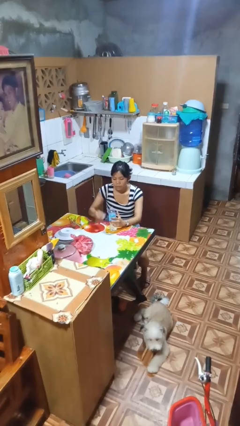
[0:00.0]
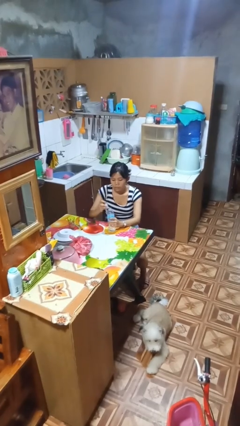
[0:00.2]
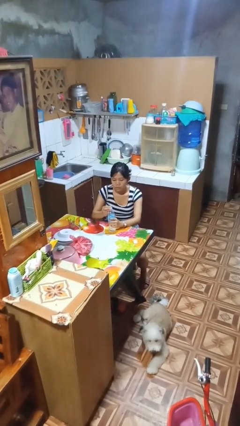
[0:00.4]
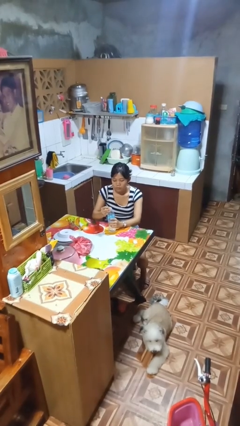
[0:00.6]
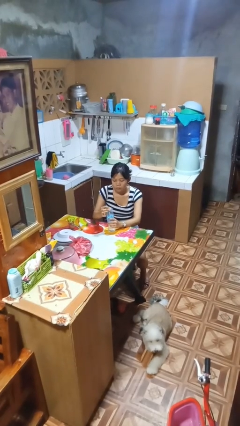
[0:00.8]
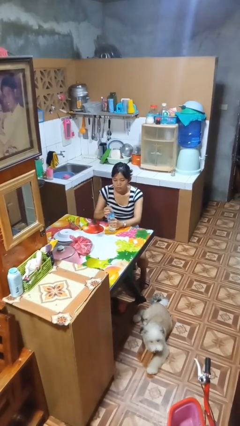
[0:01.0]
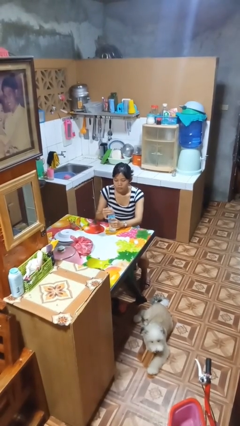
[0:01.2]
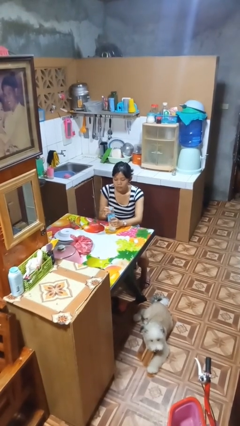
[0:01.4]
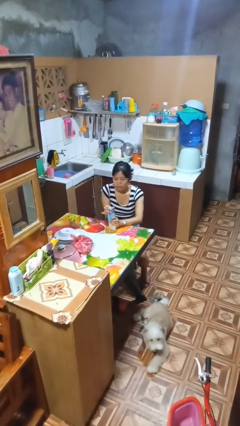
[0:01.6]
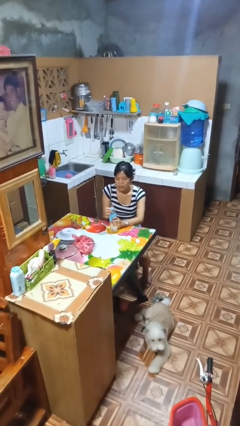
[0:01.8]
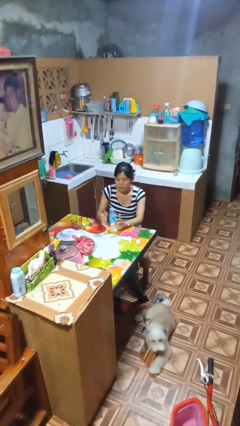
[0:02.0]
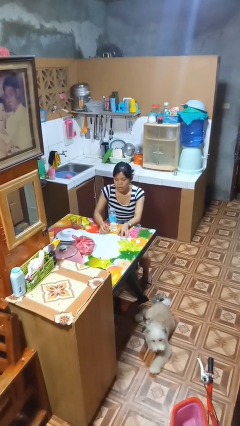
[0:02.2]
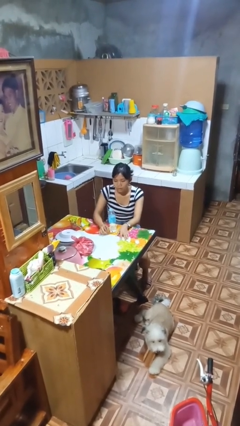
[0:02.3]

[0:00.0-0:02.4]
person screws lid to bottle

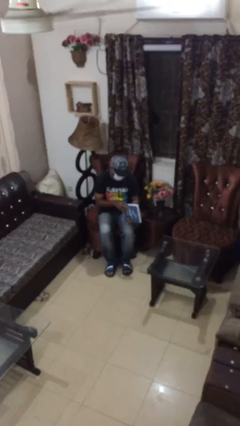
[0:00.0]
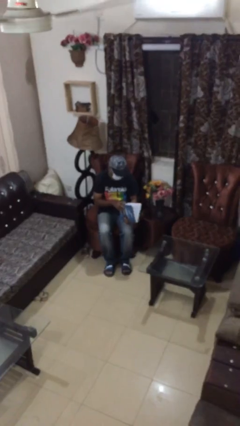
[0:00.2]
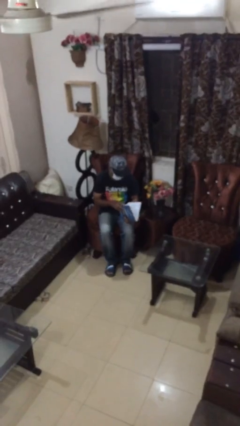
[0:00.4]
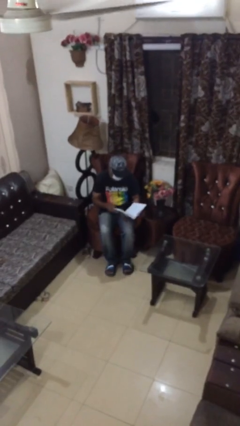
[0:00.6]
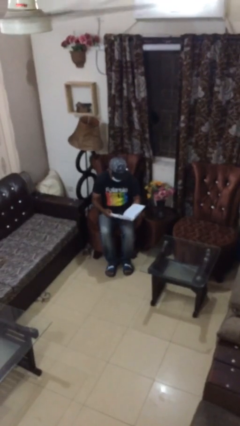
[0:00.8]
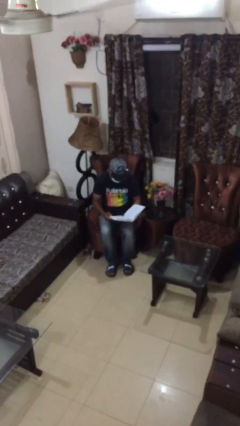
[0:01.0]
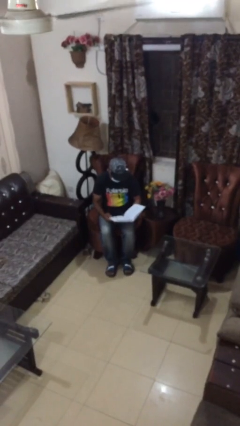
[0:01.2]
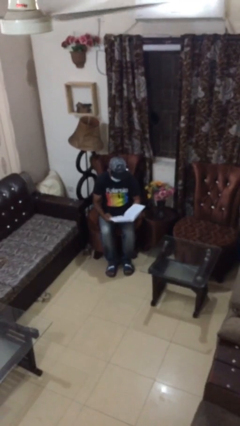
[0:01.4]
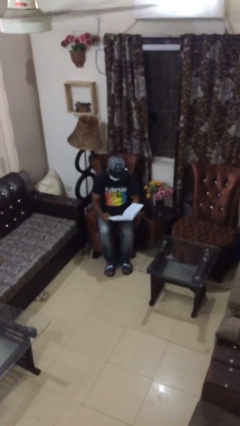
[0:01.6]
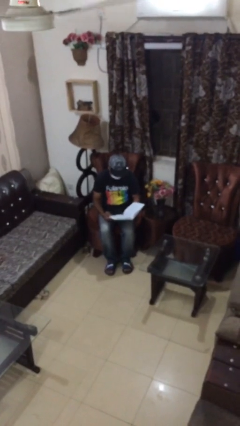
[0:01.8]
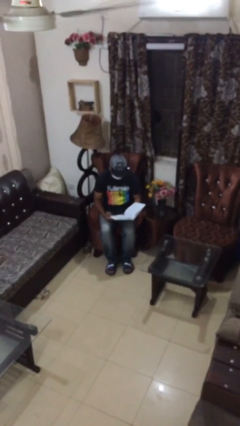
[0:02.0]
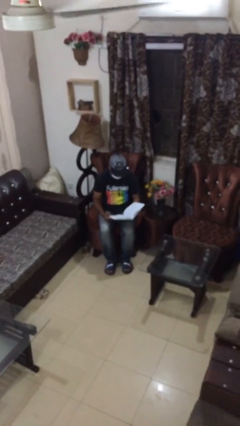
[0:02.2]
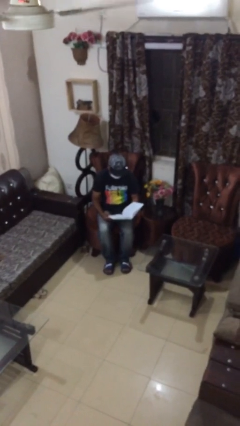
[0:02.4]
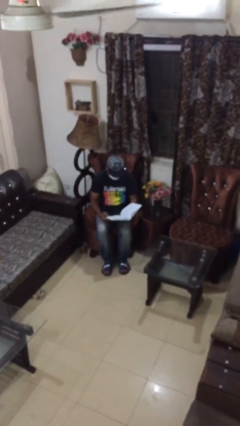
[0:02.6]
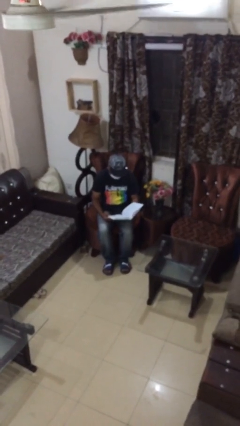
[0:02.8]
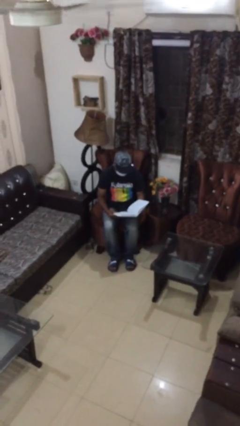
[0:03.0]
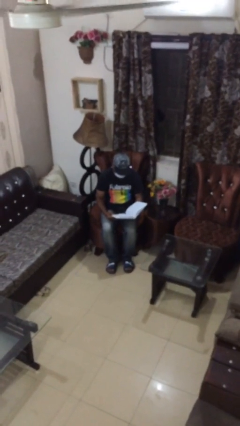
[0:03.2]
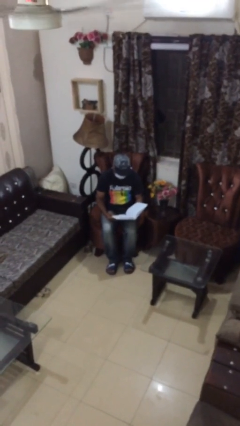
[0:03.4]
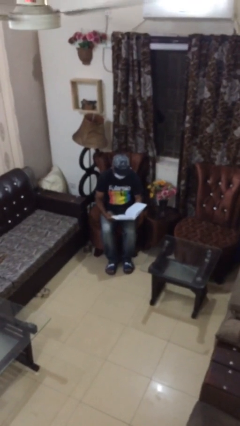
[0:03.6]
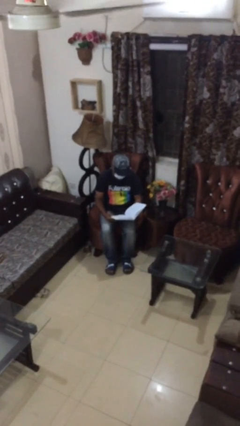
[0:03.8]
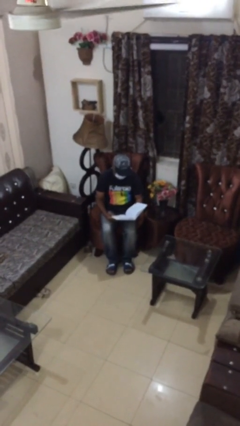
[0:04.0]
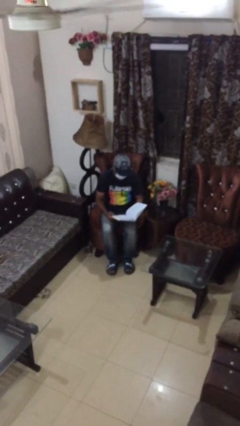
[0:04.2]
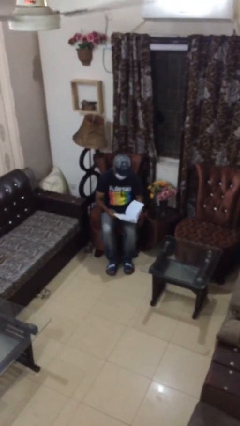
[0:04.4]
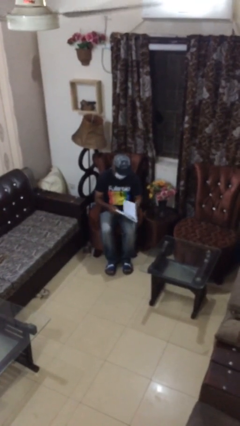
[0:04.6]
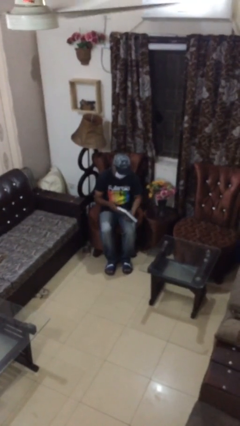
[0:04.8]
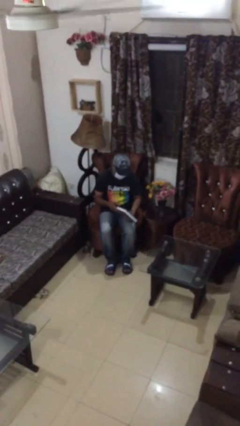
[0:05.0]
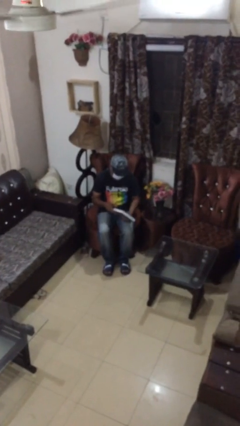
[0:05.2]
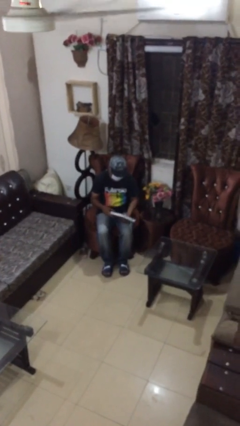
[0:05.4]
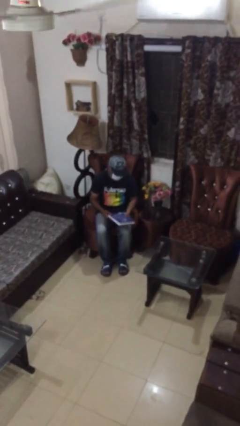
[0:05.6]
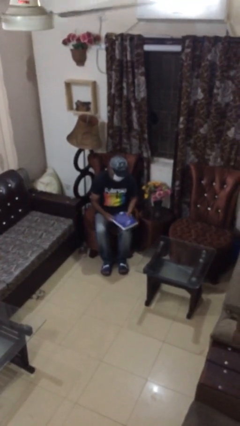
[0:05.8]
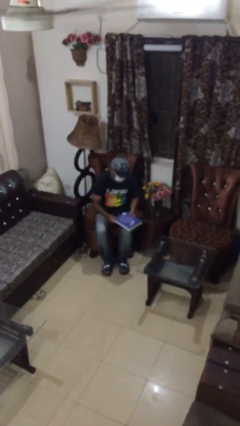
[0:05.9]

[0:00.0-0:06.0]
person reads document

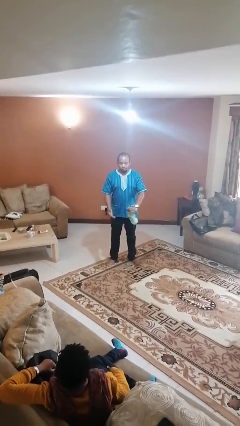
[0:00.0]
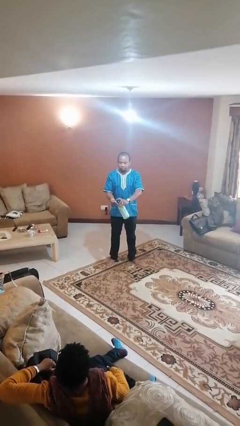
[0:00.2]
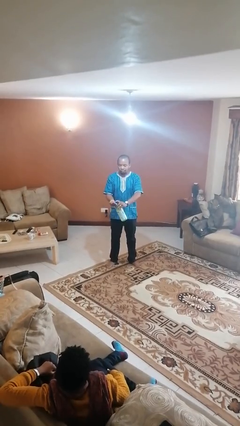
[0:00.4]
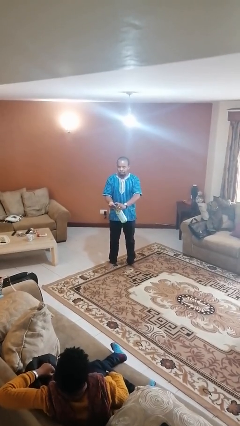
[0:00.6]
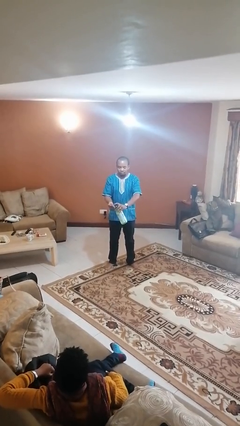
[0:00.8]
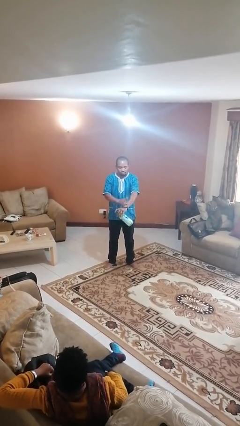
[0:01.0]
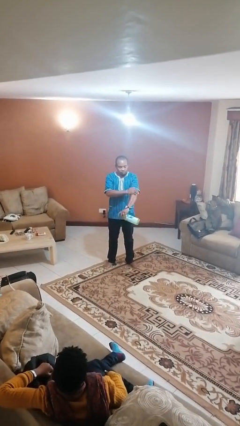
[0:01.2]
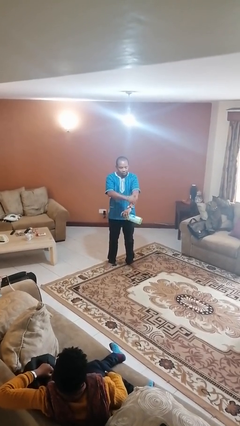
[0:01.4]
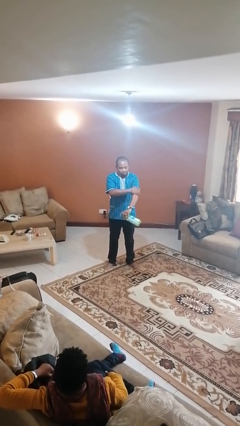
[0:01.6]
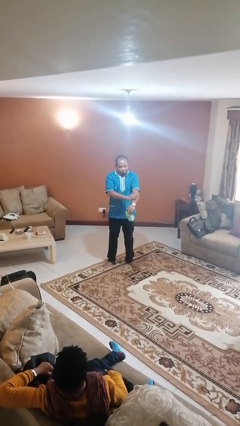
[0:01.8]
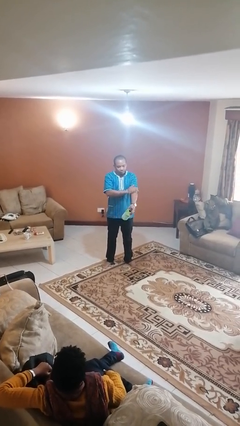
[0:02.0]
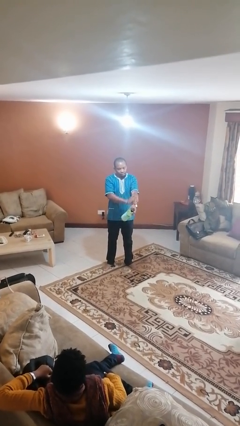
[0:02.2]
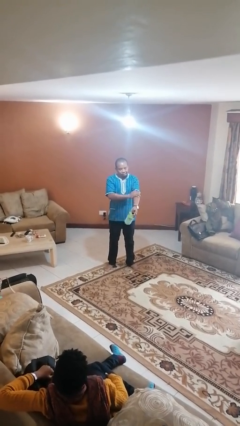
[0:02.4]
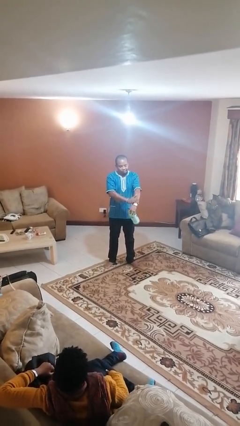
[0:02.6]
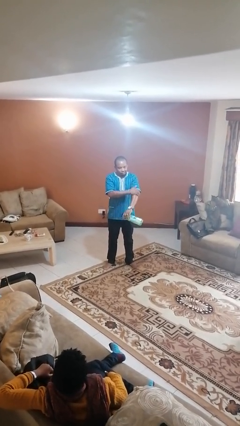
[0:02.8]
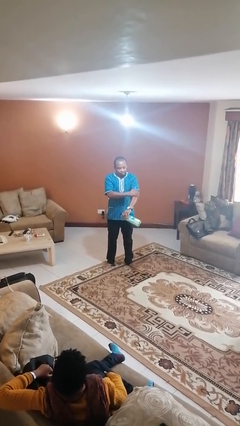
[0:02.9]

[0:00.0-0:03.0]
person applies sunscreen

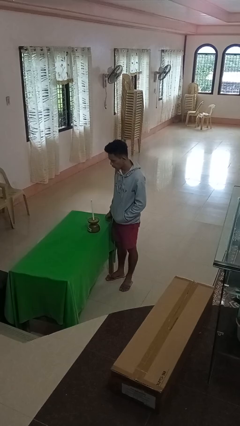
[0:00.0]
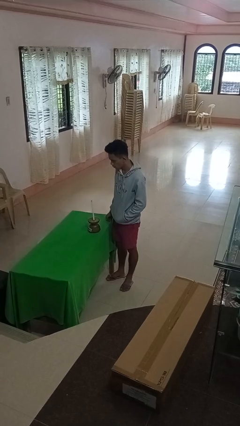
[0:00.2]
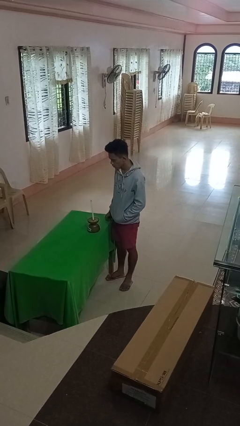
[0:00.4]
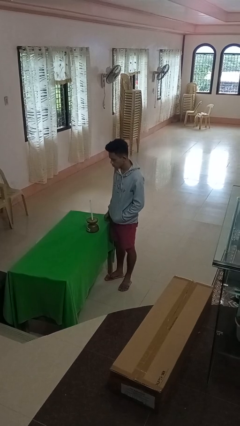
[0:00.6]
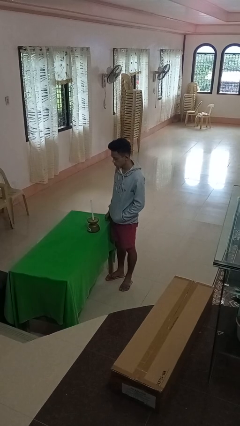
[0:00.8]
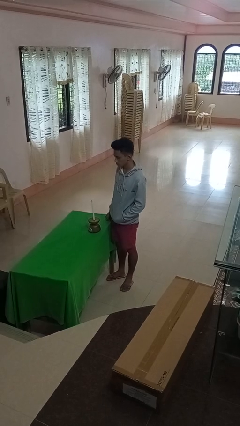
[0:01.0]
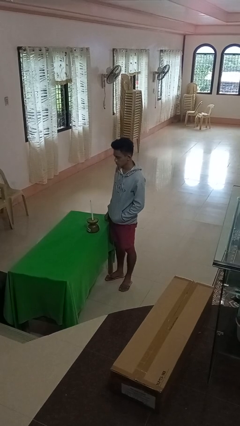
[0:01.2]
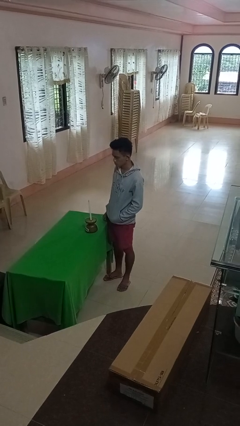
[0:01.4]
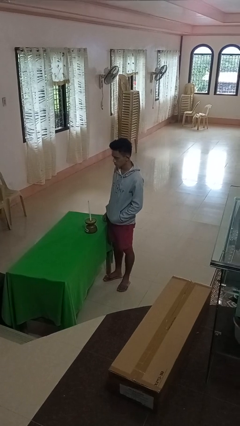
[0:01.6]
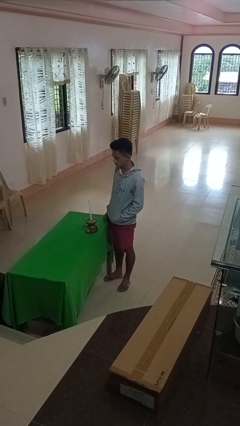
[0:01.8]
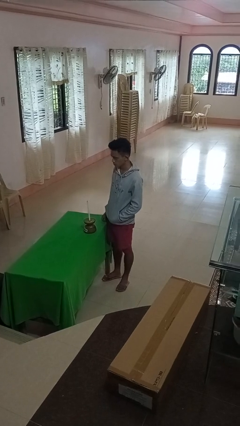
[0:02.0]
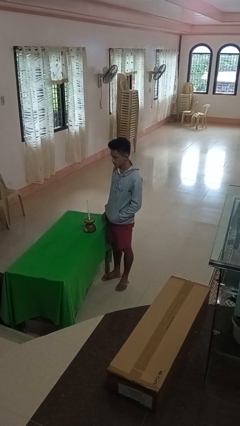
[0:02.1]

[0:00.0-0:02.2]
person extinguishes candle

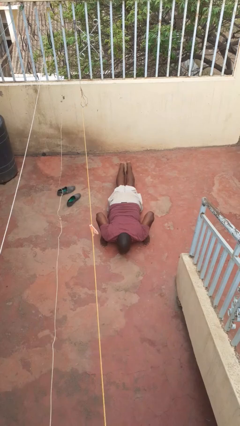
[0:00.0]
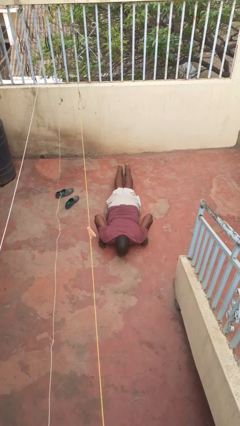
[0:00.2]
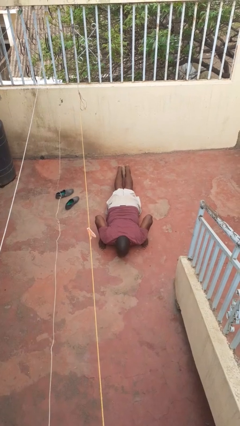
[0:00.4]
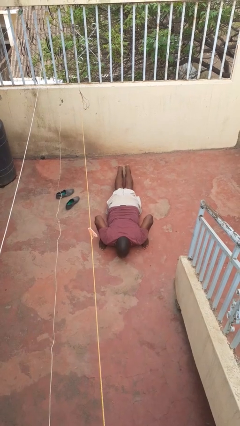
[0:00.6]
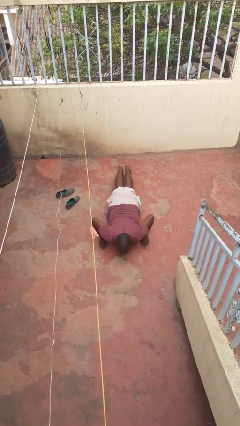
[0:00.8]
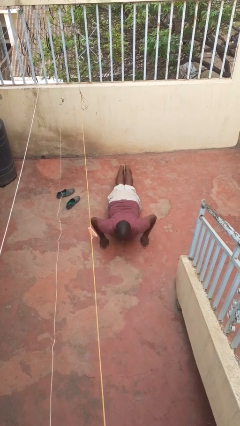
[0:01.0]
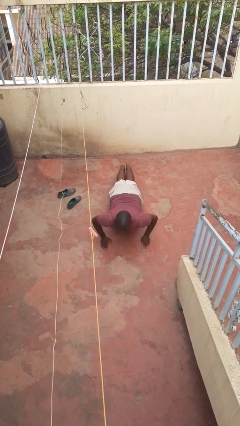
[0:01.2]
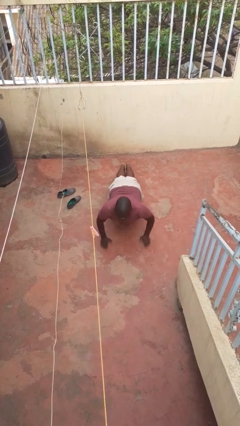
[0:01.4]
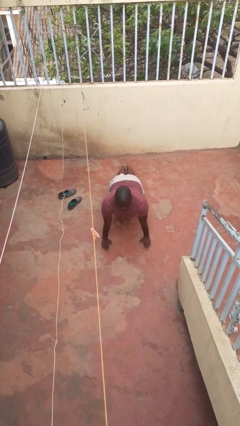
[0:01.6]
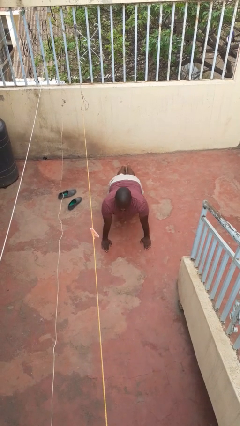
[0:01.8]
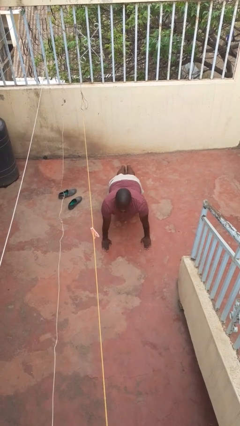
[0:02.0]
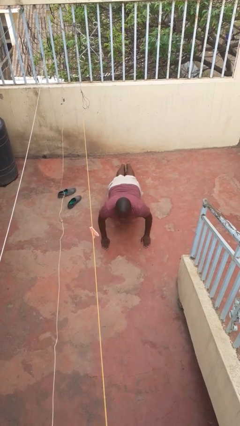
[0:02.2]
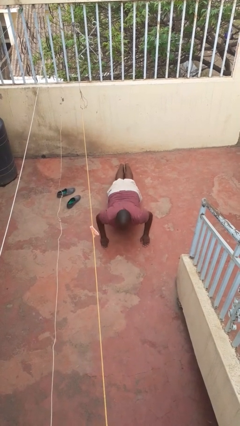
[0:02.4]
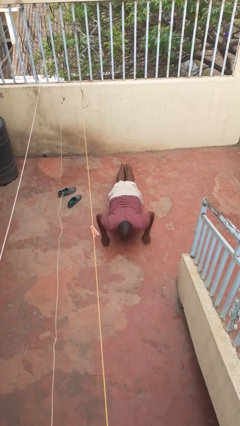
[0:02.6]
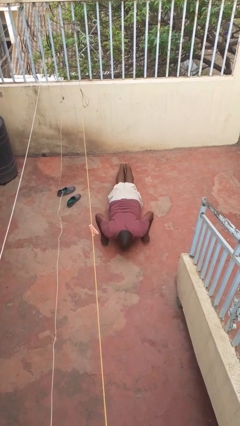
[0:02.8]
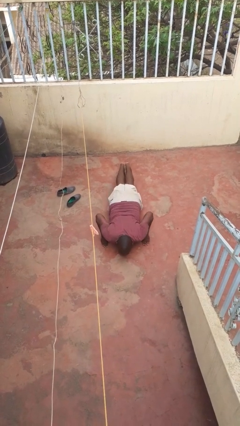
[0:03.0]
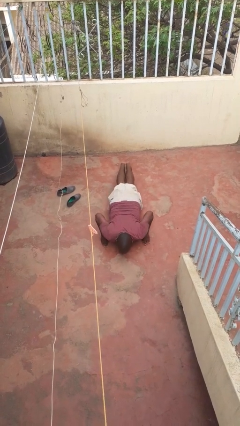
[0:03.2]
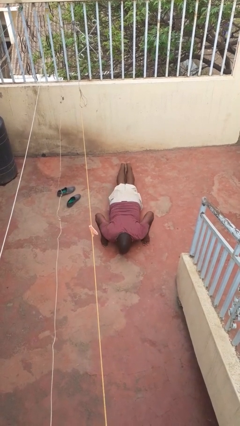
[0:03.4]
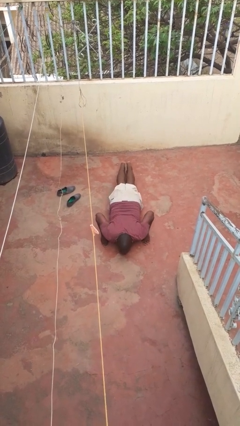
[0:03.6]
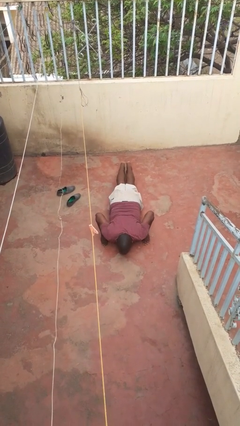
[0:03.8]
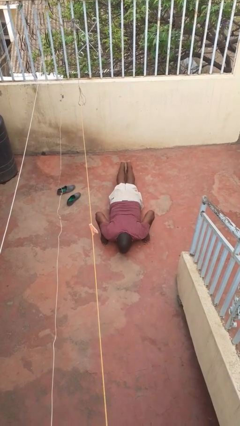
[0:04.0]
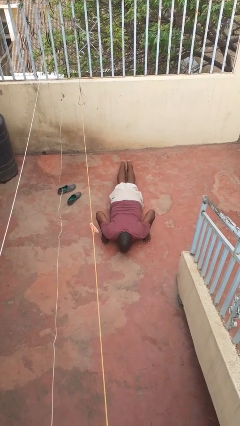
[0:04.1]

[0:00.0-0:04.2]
person exercises with pushup
